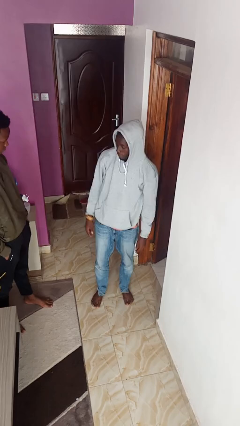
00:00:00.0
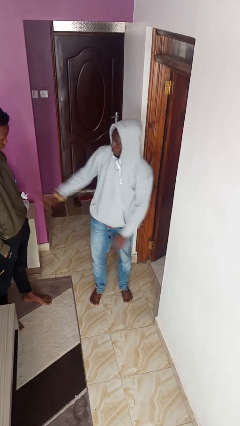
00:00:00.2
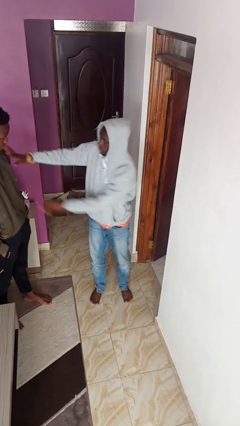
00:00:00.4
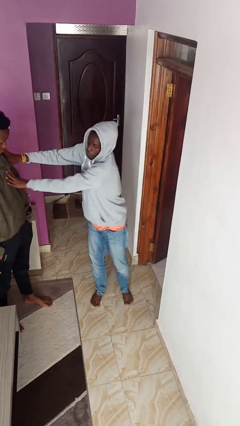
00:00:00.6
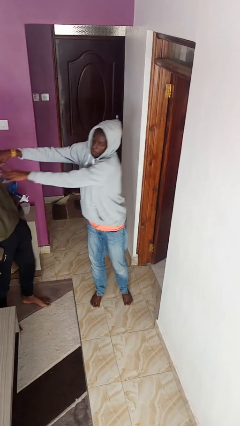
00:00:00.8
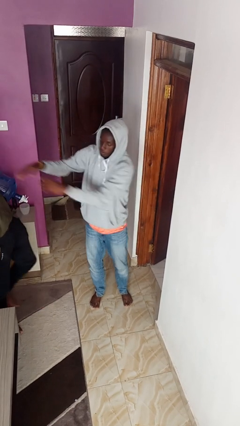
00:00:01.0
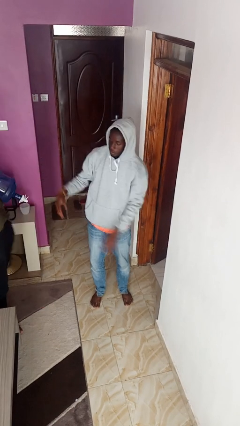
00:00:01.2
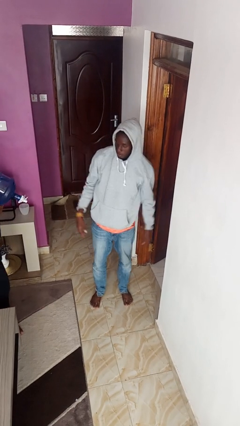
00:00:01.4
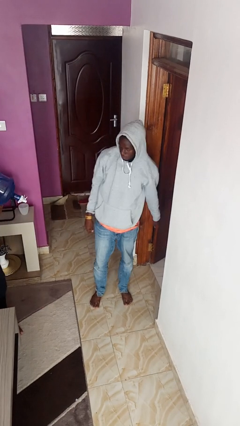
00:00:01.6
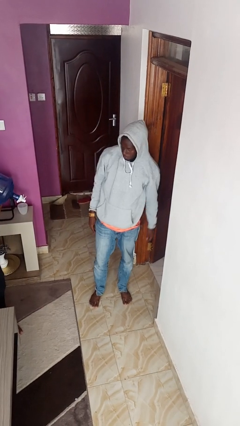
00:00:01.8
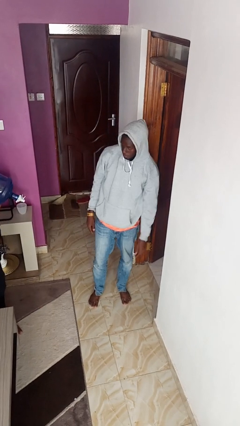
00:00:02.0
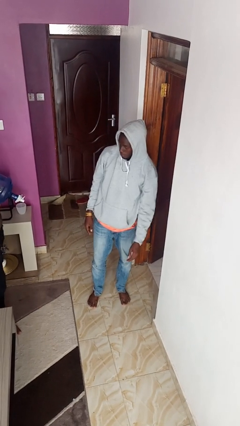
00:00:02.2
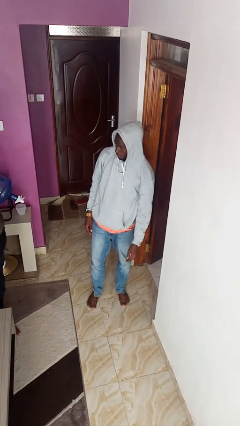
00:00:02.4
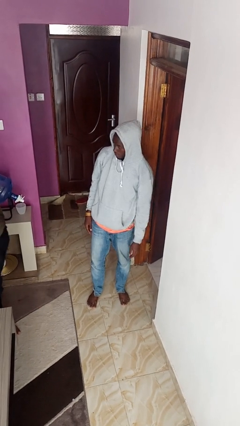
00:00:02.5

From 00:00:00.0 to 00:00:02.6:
person shoves person

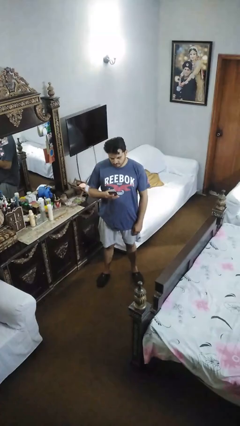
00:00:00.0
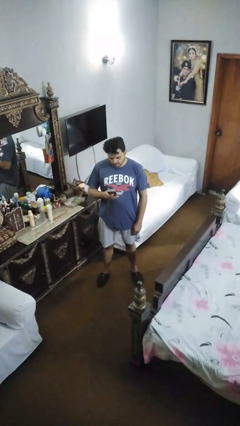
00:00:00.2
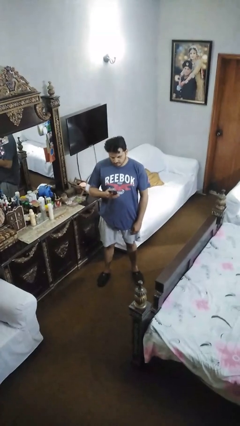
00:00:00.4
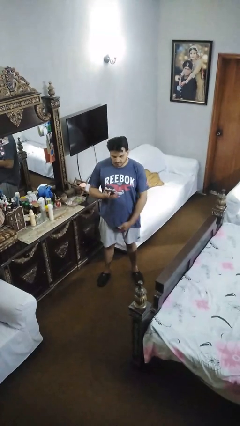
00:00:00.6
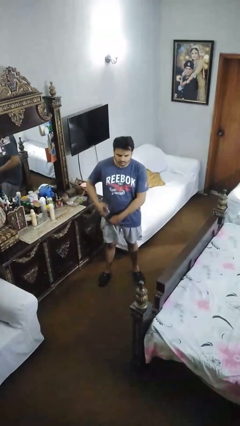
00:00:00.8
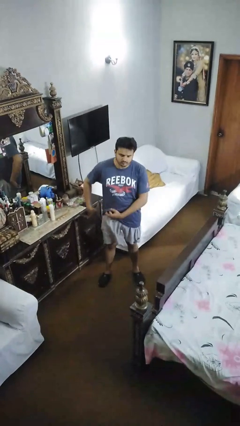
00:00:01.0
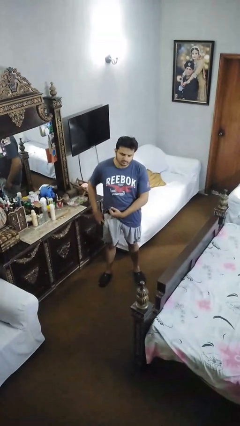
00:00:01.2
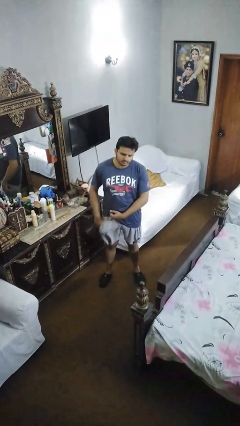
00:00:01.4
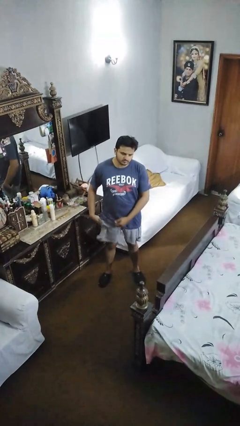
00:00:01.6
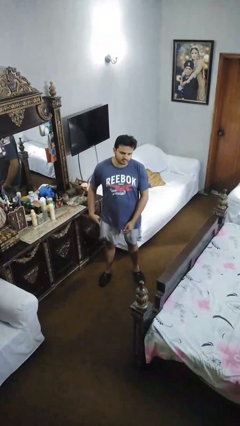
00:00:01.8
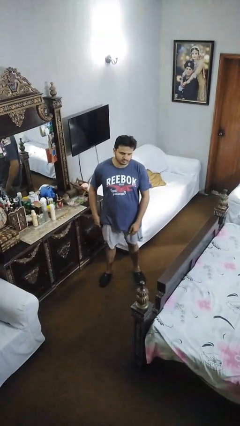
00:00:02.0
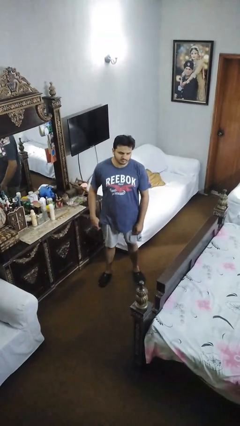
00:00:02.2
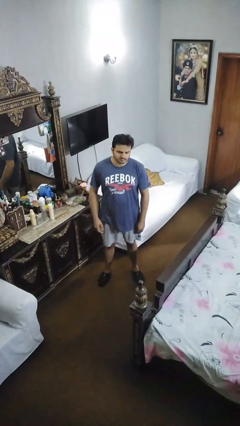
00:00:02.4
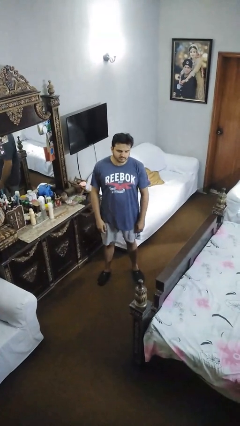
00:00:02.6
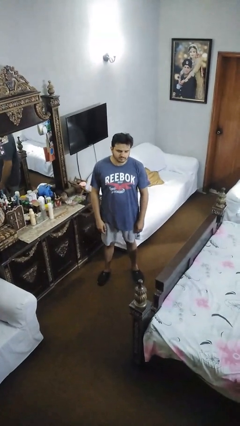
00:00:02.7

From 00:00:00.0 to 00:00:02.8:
person puts phone into pocket

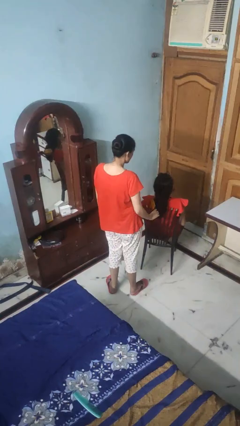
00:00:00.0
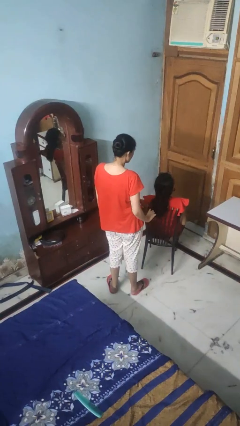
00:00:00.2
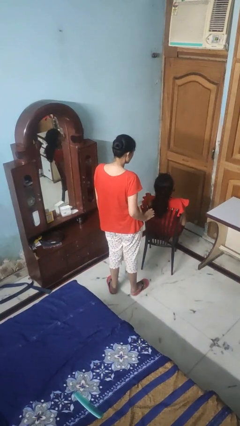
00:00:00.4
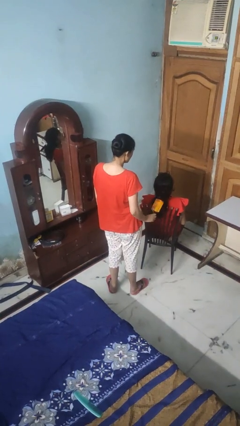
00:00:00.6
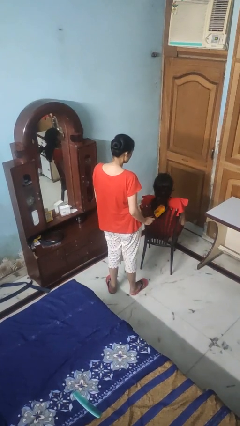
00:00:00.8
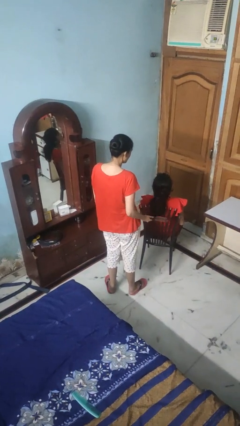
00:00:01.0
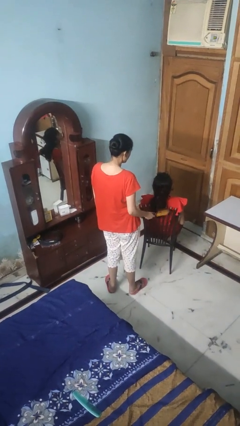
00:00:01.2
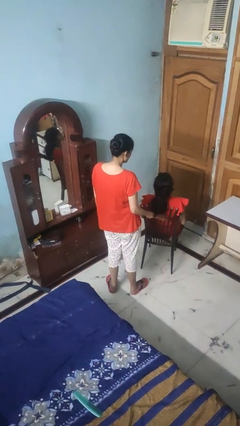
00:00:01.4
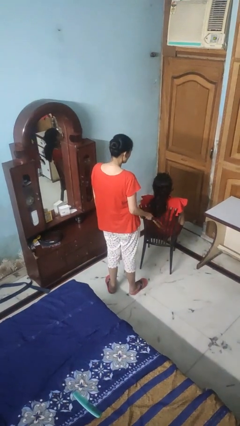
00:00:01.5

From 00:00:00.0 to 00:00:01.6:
person brushes hair of person

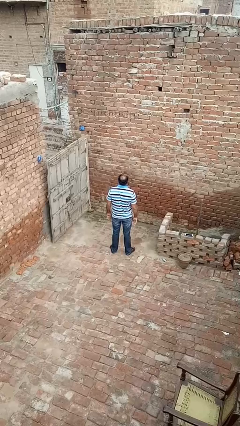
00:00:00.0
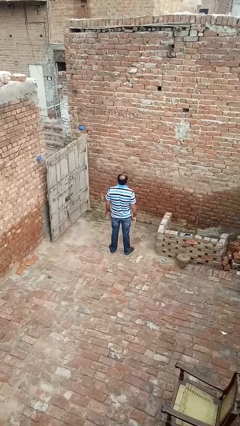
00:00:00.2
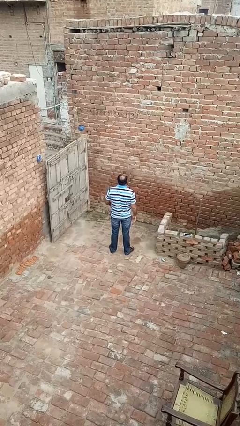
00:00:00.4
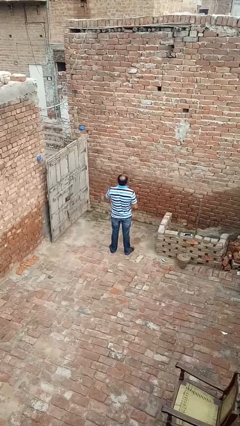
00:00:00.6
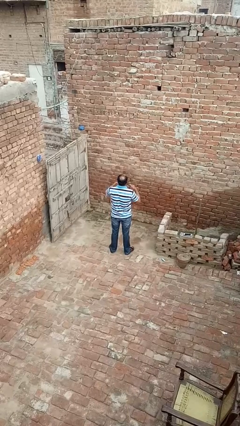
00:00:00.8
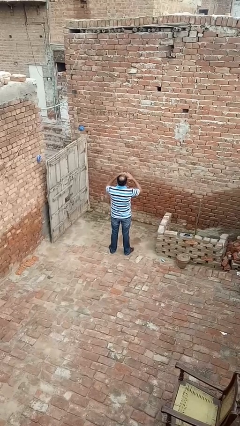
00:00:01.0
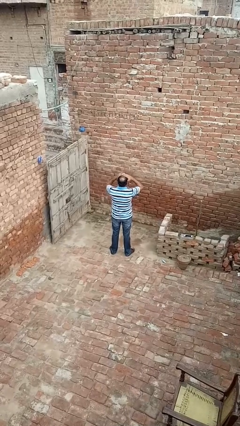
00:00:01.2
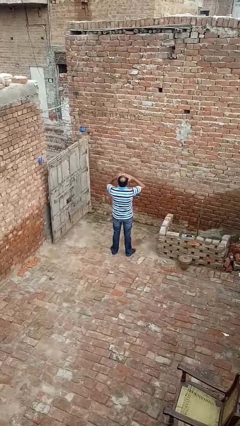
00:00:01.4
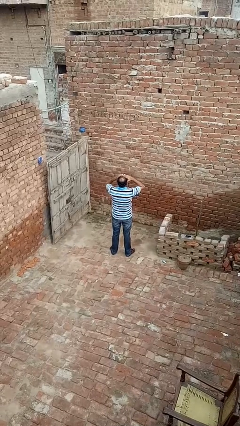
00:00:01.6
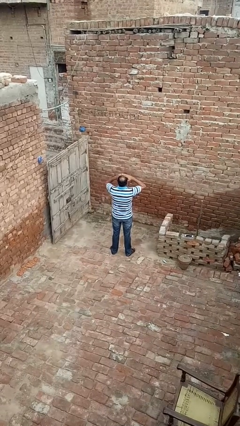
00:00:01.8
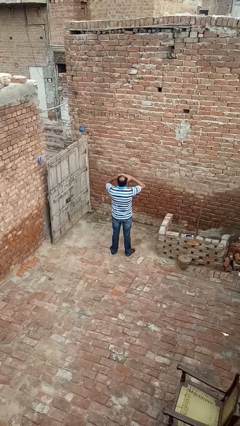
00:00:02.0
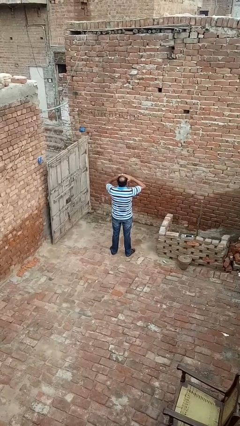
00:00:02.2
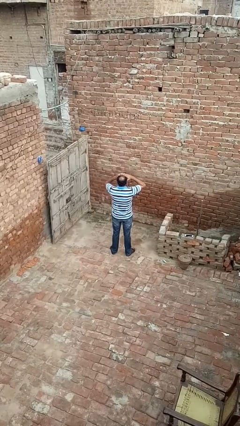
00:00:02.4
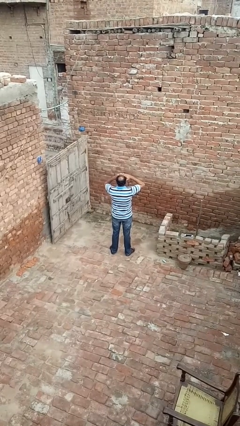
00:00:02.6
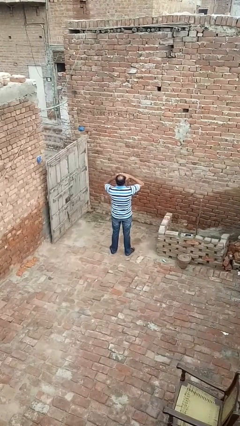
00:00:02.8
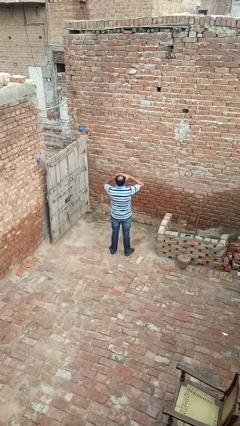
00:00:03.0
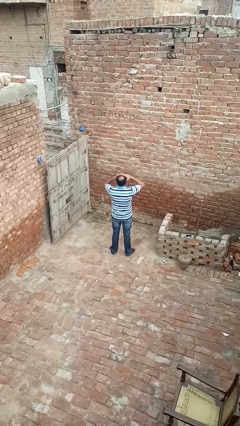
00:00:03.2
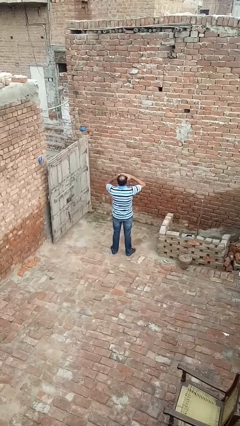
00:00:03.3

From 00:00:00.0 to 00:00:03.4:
person shades eyes

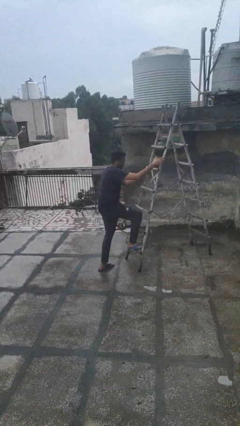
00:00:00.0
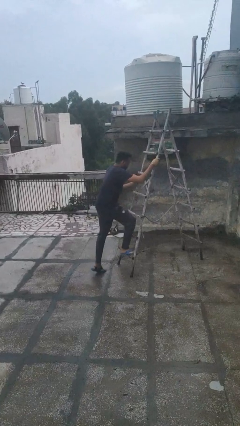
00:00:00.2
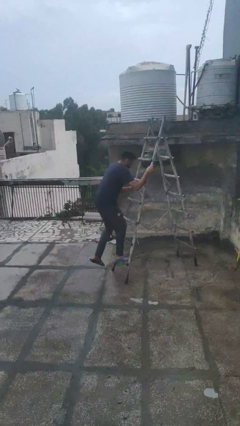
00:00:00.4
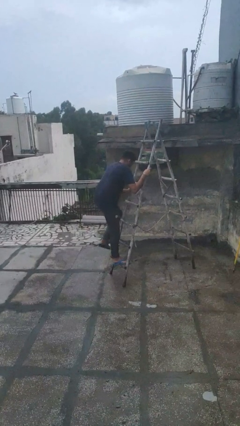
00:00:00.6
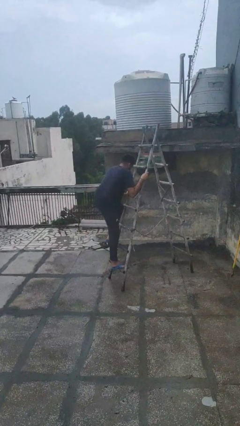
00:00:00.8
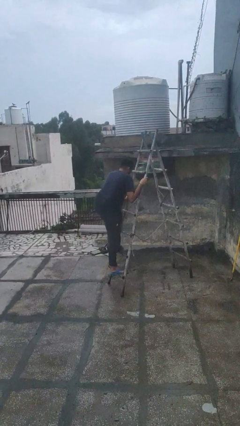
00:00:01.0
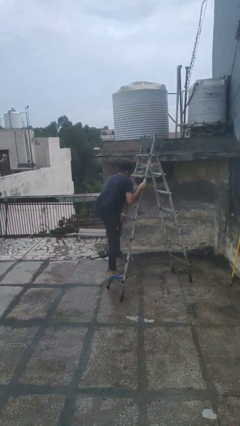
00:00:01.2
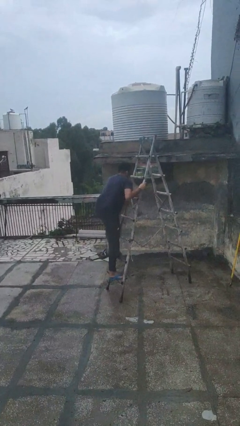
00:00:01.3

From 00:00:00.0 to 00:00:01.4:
person climbs up ladder

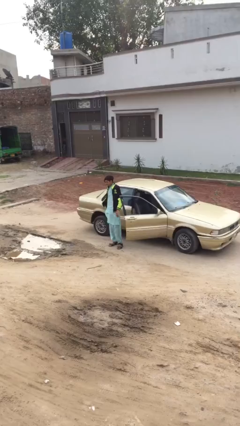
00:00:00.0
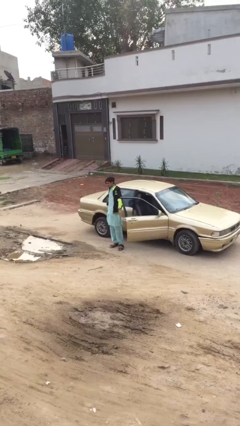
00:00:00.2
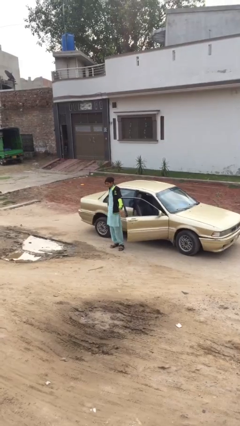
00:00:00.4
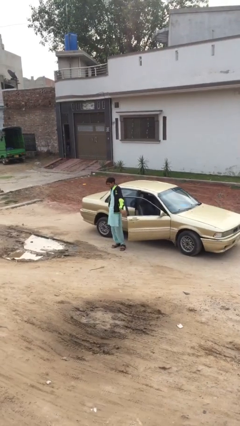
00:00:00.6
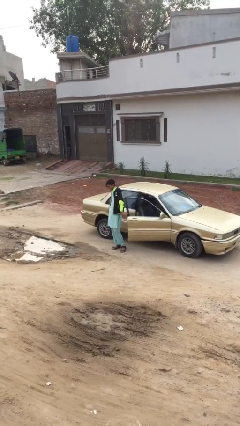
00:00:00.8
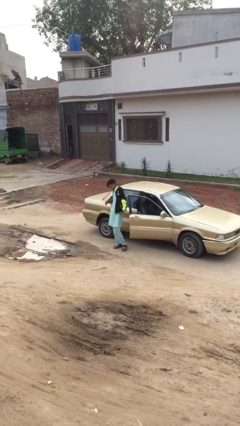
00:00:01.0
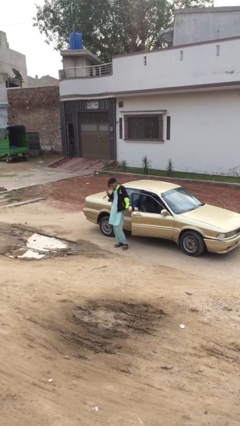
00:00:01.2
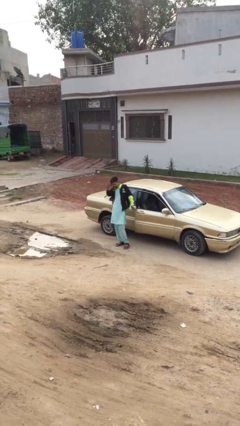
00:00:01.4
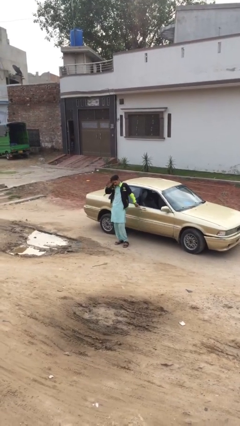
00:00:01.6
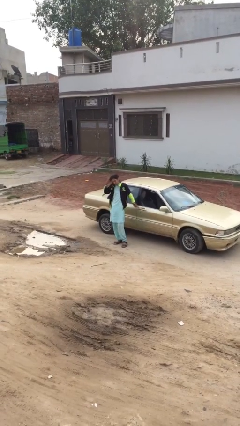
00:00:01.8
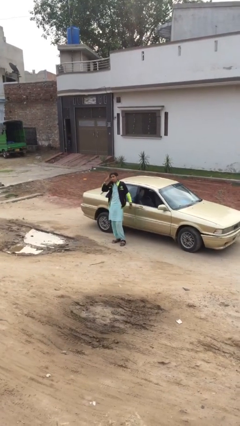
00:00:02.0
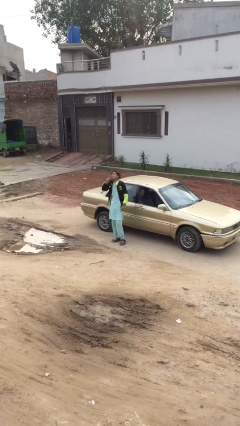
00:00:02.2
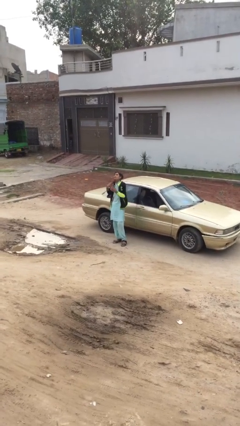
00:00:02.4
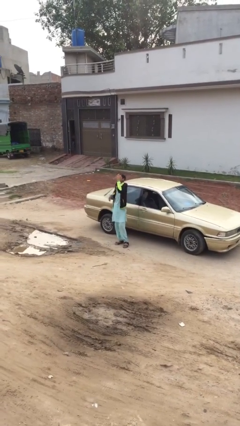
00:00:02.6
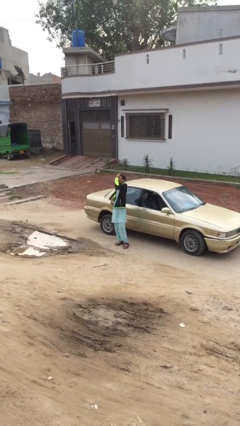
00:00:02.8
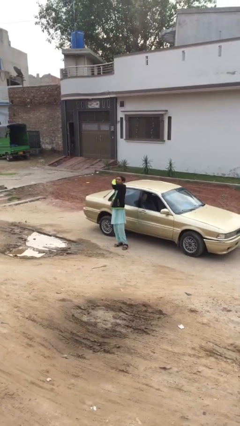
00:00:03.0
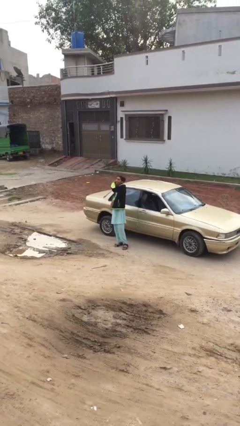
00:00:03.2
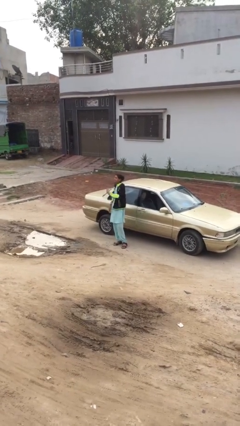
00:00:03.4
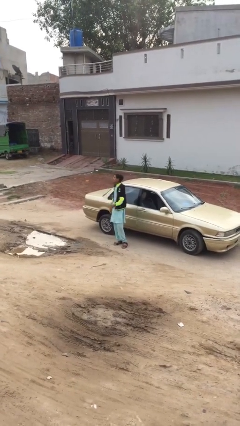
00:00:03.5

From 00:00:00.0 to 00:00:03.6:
person closes car door

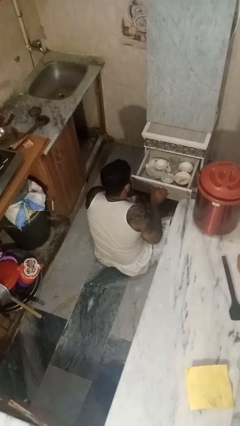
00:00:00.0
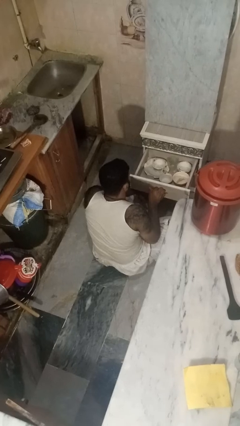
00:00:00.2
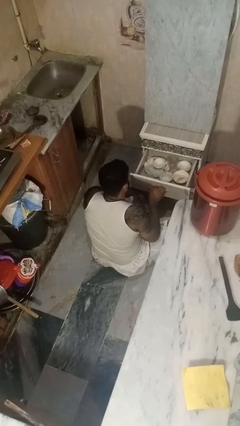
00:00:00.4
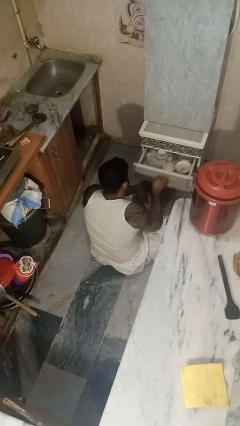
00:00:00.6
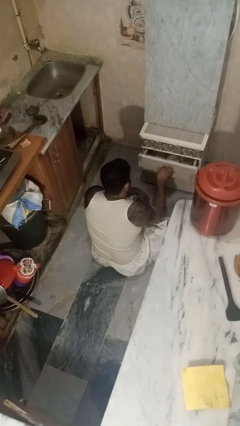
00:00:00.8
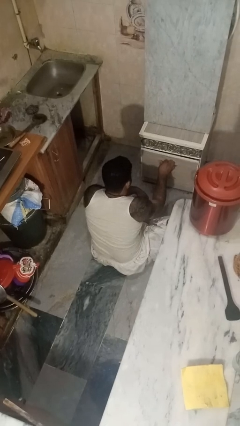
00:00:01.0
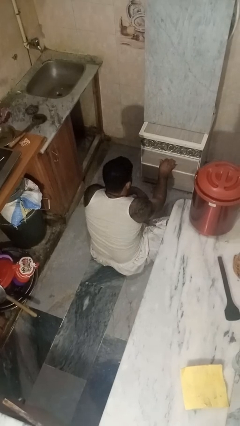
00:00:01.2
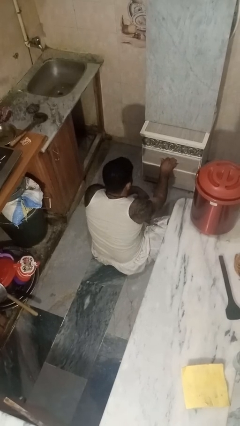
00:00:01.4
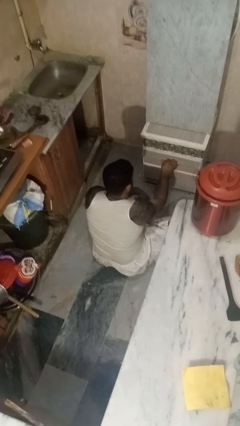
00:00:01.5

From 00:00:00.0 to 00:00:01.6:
person closes kitchen drawer

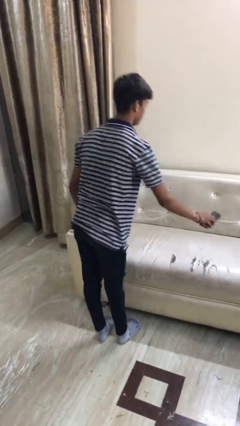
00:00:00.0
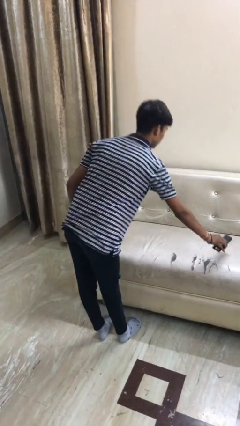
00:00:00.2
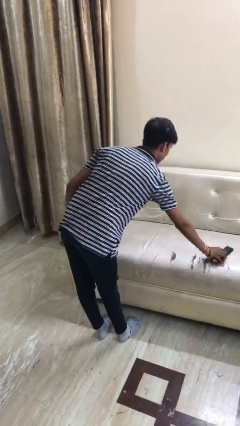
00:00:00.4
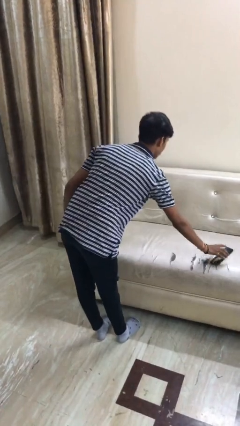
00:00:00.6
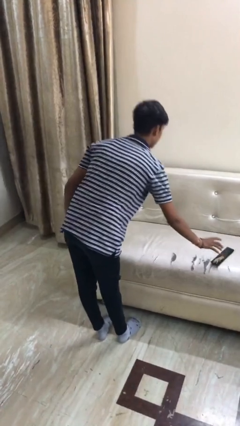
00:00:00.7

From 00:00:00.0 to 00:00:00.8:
person puts down object on bed
